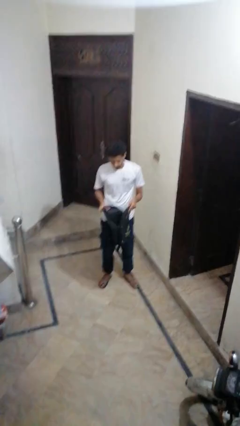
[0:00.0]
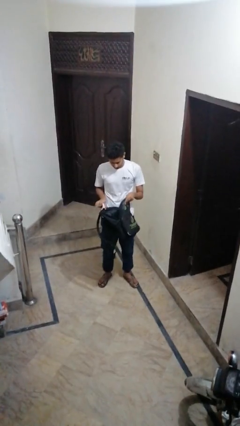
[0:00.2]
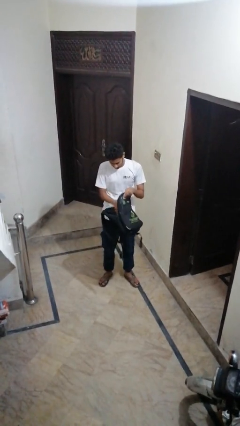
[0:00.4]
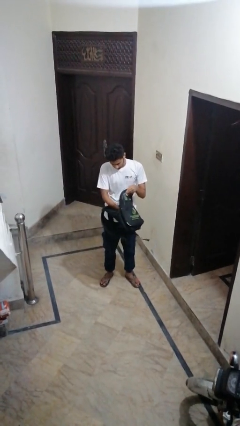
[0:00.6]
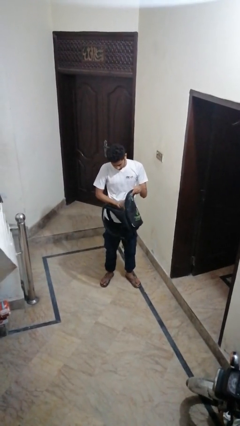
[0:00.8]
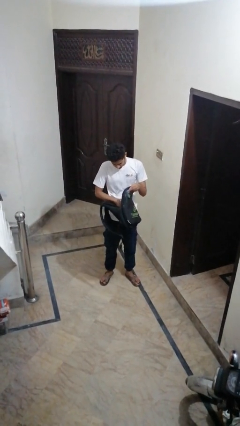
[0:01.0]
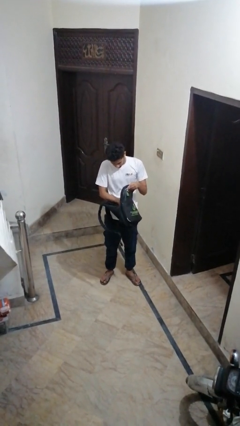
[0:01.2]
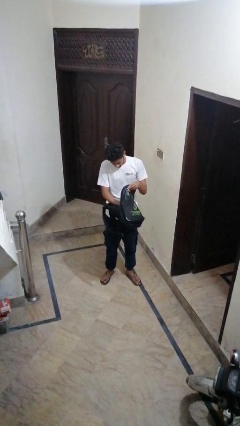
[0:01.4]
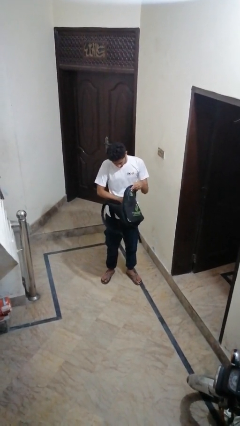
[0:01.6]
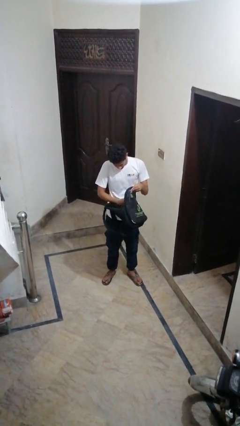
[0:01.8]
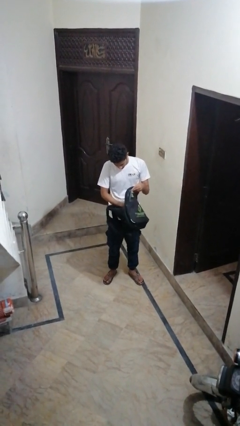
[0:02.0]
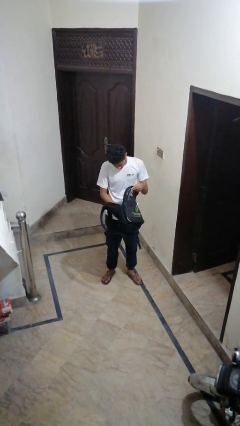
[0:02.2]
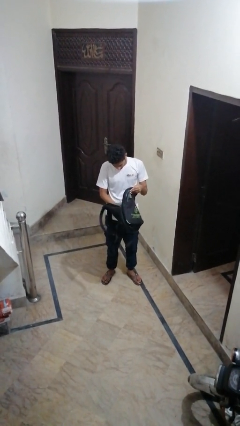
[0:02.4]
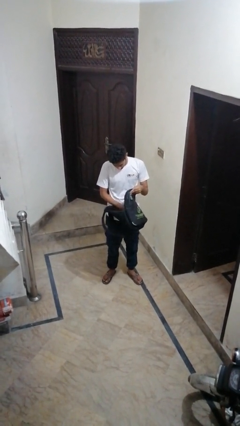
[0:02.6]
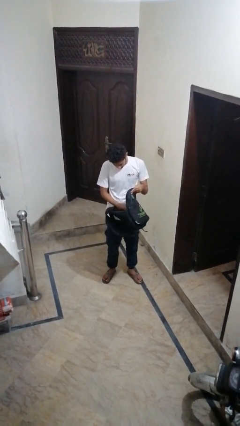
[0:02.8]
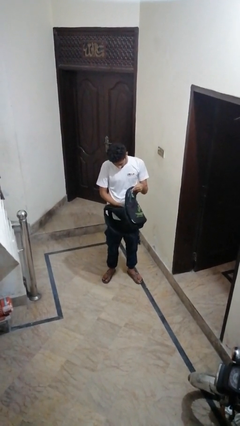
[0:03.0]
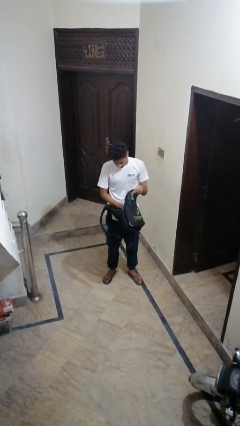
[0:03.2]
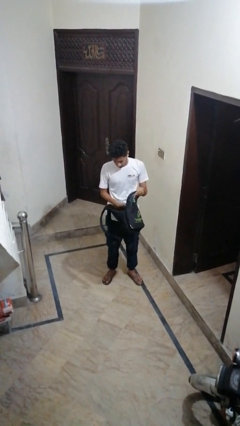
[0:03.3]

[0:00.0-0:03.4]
person searches in backpack

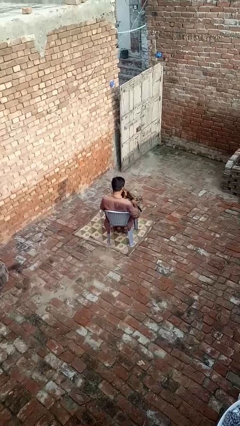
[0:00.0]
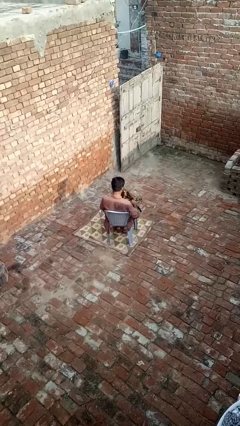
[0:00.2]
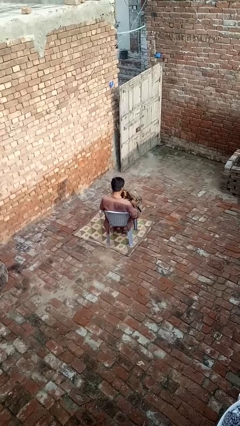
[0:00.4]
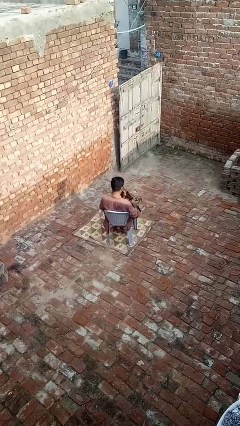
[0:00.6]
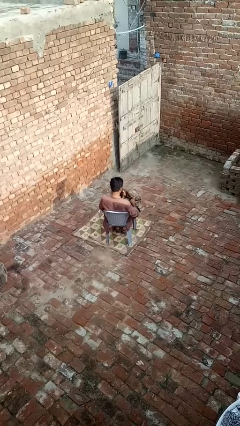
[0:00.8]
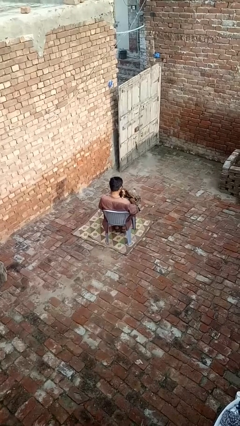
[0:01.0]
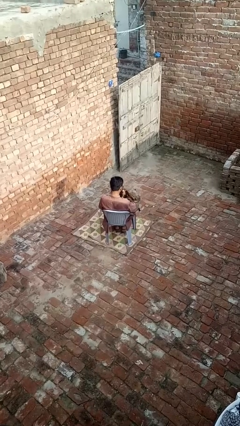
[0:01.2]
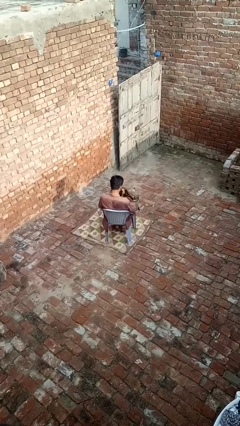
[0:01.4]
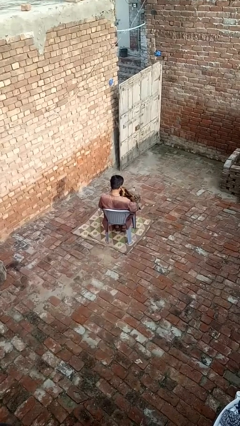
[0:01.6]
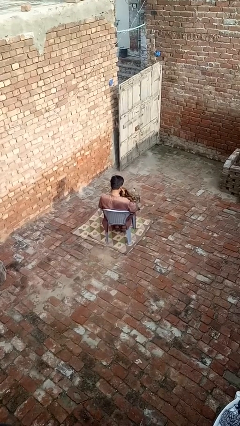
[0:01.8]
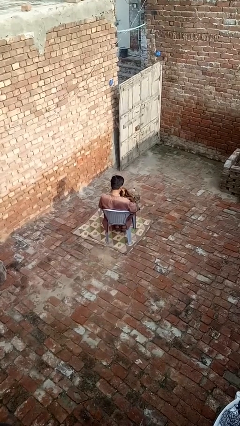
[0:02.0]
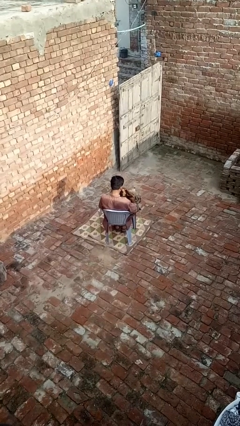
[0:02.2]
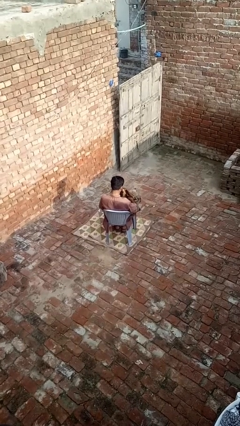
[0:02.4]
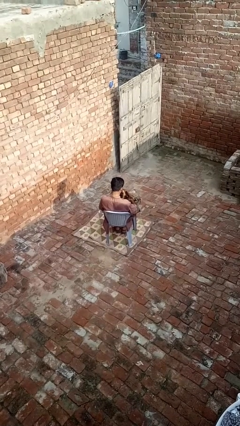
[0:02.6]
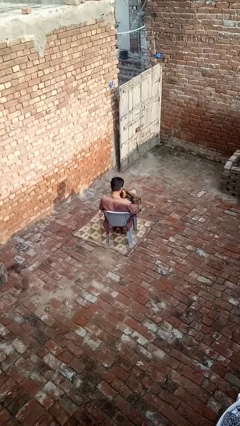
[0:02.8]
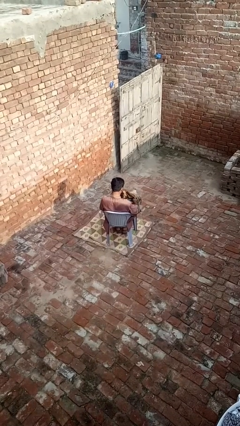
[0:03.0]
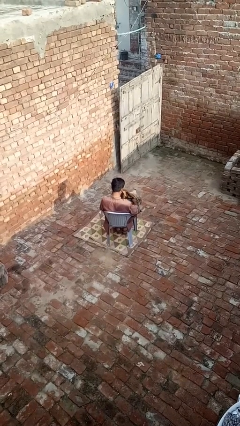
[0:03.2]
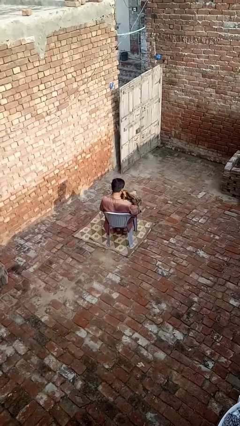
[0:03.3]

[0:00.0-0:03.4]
person searches in purse

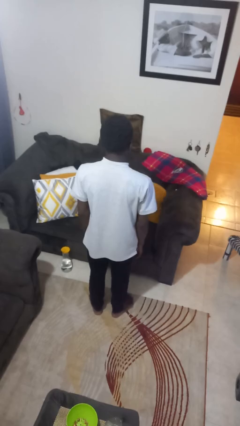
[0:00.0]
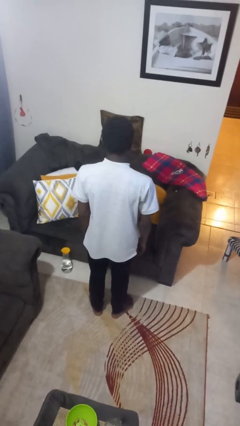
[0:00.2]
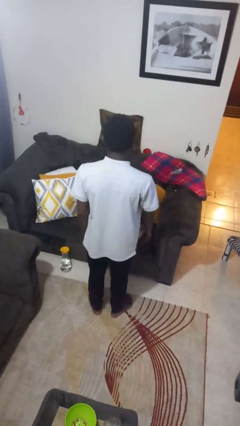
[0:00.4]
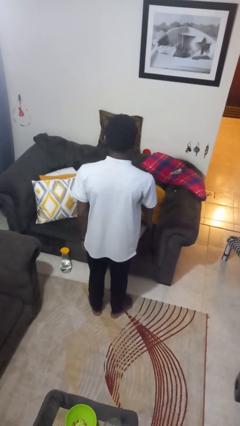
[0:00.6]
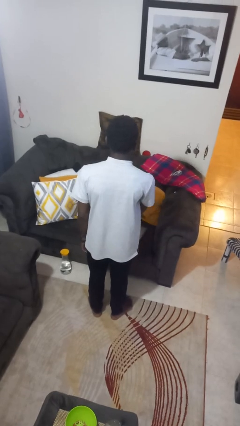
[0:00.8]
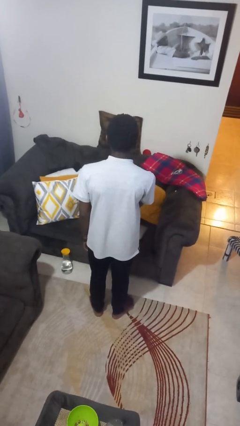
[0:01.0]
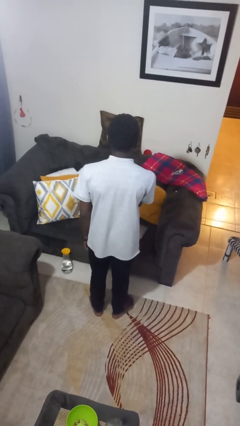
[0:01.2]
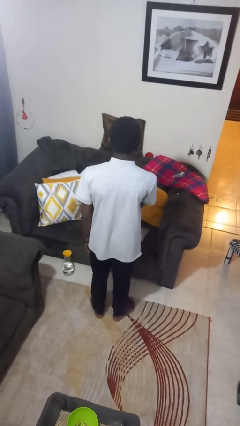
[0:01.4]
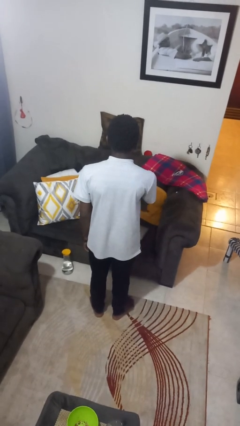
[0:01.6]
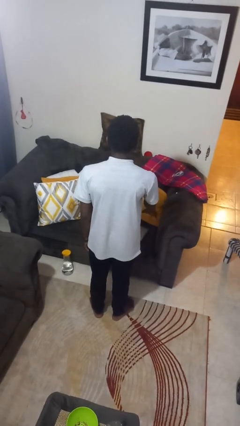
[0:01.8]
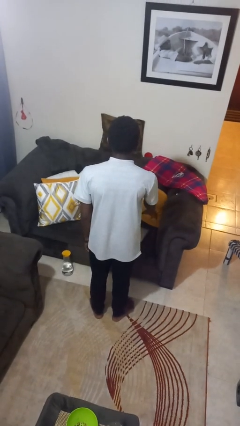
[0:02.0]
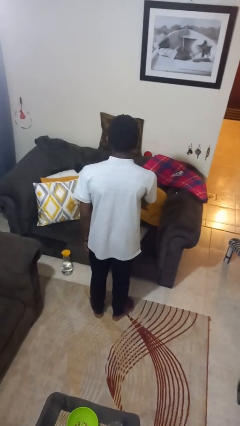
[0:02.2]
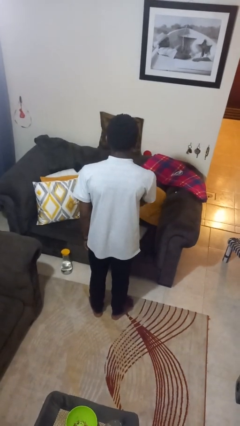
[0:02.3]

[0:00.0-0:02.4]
person waves hand over object

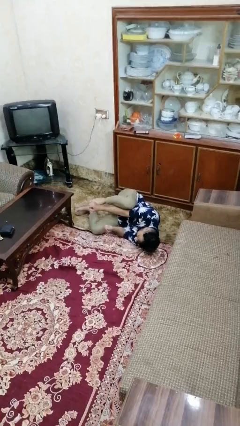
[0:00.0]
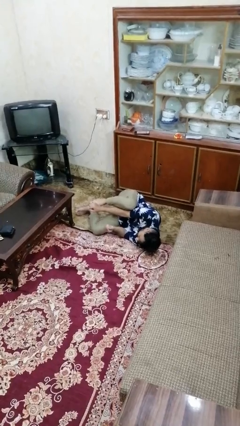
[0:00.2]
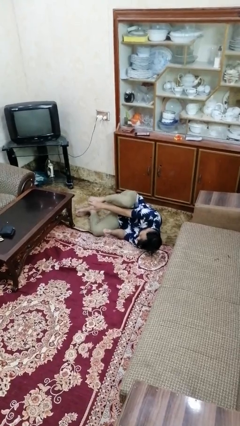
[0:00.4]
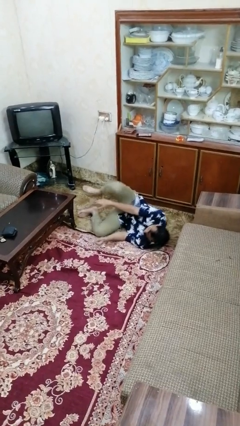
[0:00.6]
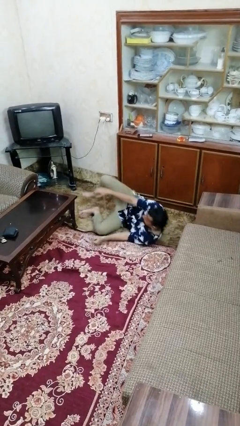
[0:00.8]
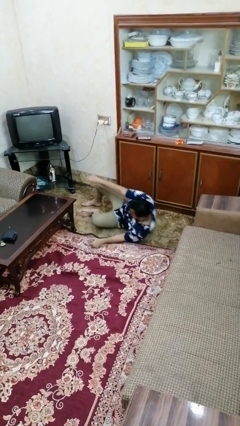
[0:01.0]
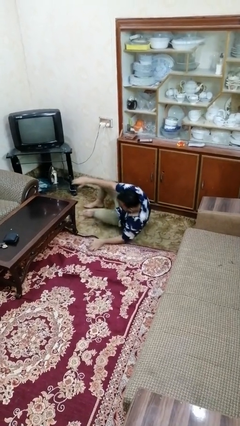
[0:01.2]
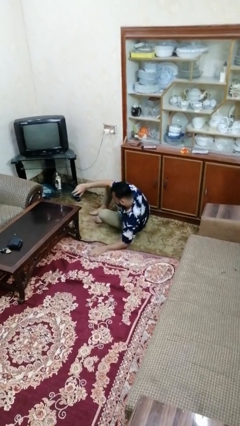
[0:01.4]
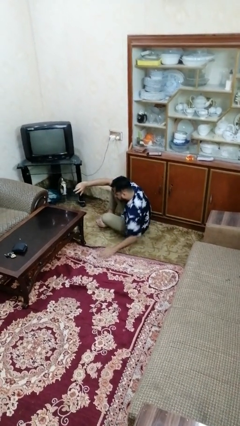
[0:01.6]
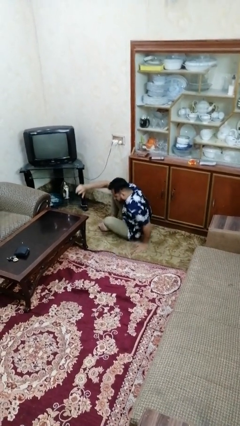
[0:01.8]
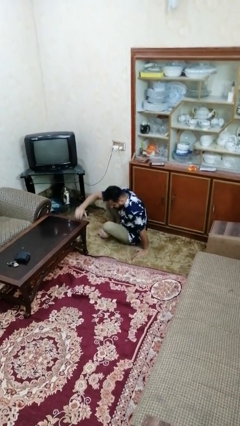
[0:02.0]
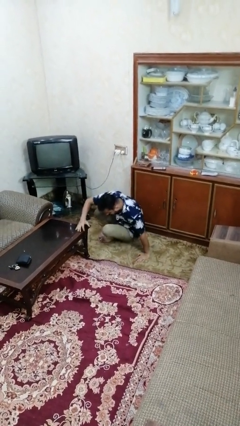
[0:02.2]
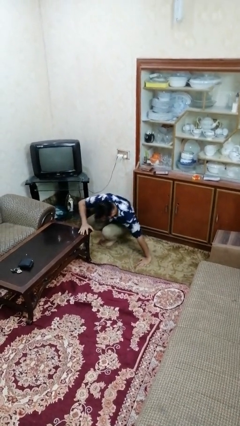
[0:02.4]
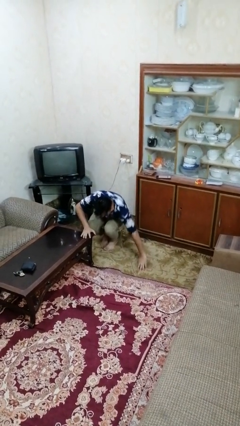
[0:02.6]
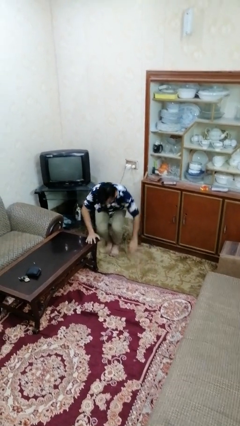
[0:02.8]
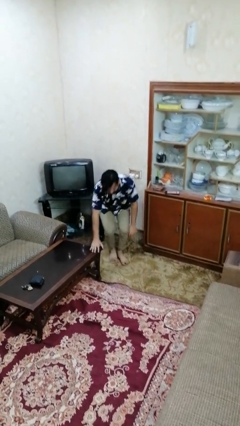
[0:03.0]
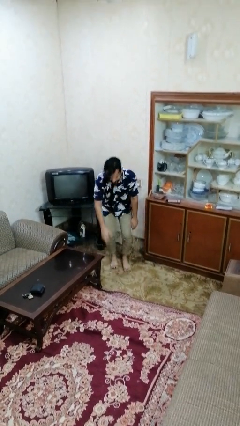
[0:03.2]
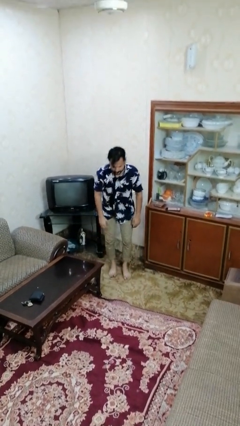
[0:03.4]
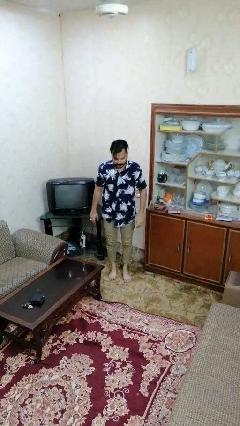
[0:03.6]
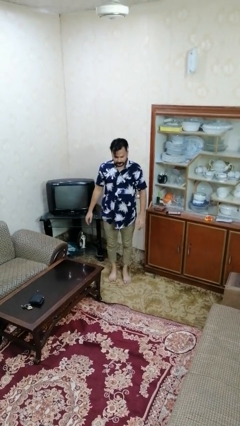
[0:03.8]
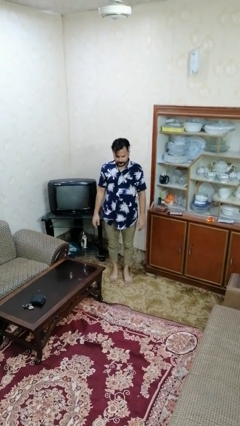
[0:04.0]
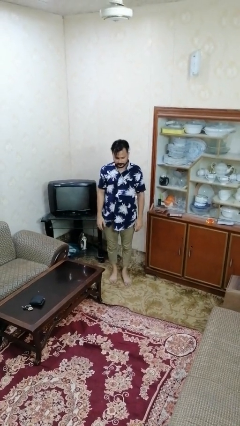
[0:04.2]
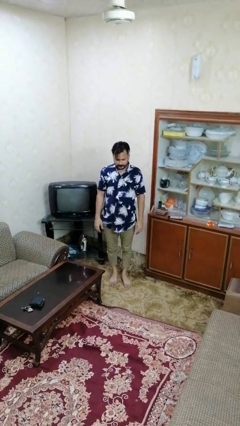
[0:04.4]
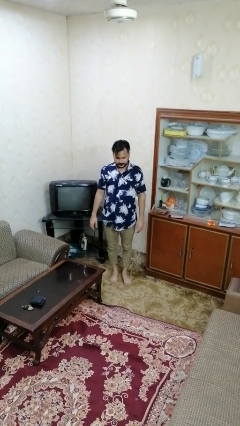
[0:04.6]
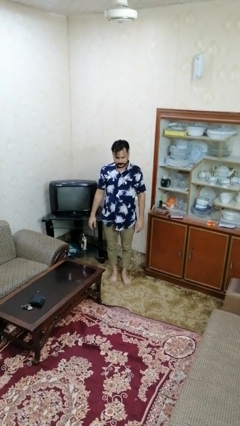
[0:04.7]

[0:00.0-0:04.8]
person stands up from floor

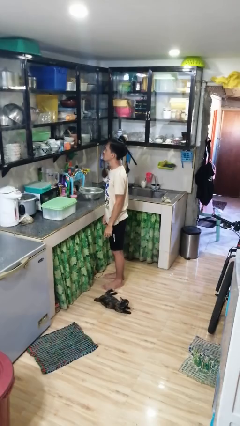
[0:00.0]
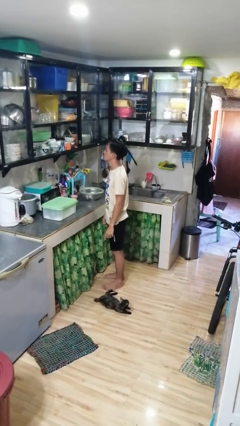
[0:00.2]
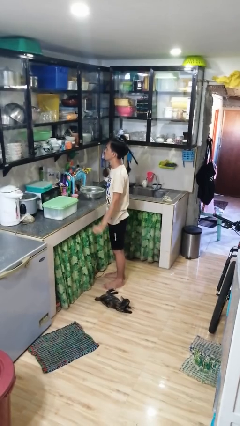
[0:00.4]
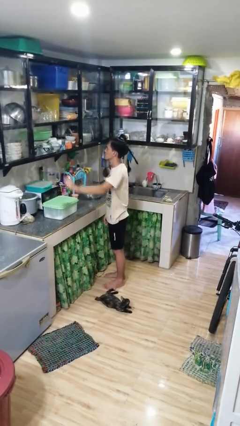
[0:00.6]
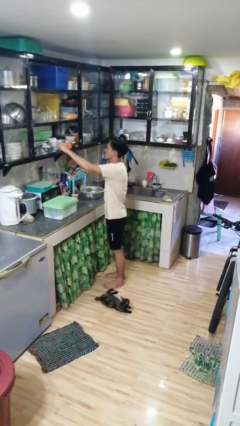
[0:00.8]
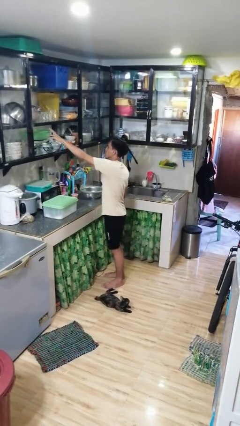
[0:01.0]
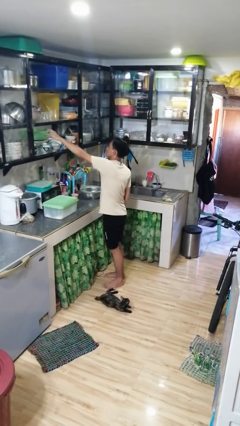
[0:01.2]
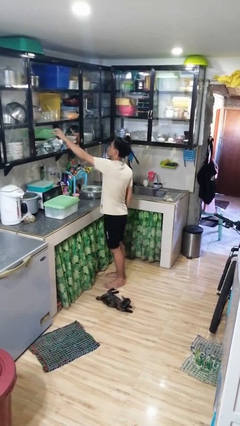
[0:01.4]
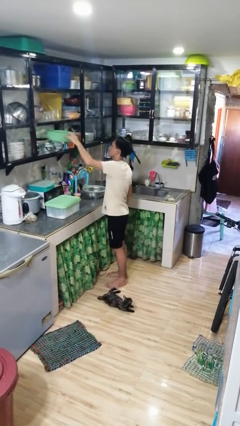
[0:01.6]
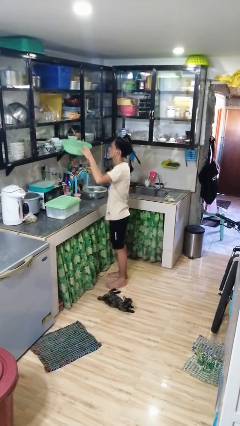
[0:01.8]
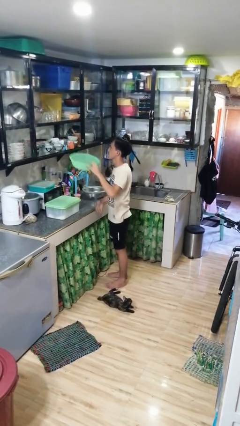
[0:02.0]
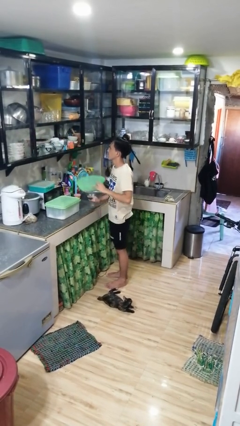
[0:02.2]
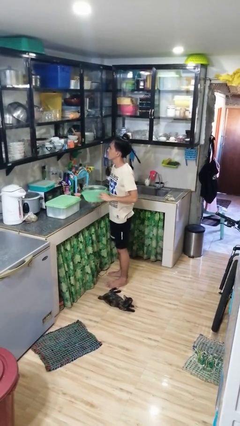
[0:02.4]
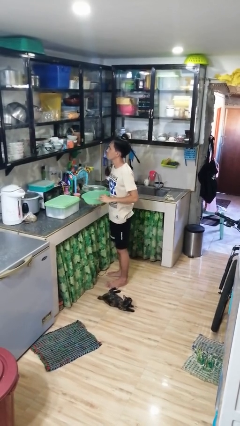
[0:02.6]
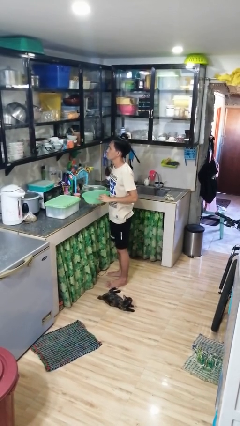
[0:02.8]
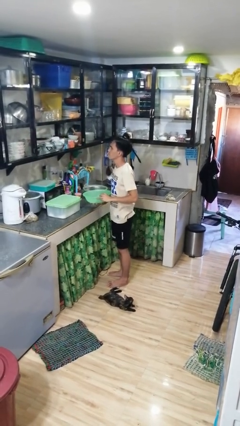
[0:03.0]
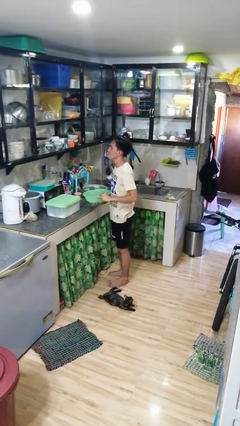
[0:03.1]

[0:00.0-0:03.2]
person picks up object from cabinet

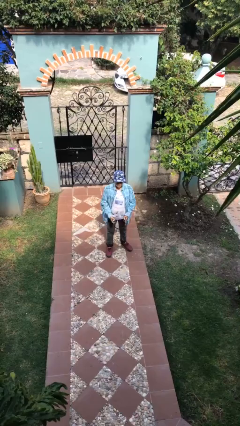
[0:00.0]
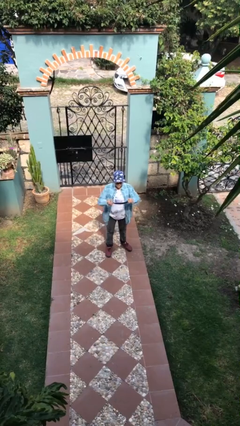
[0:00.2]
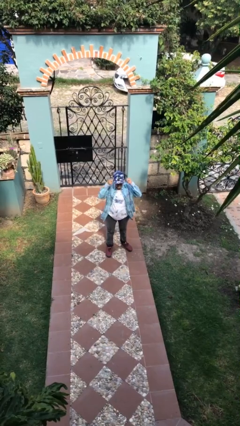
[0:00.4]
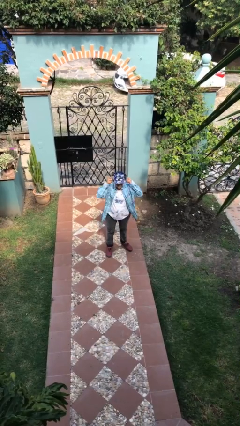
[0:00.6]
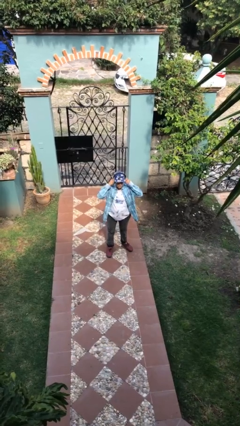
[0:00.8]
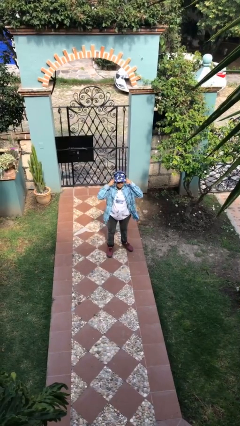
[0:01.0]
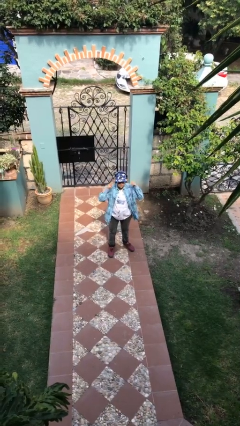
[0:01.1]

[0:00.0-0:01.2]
person puts on headphones
